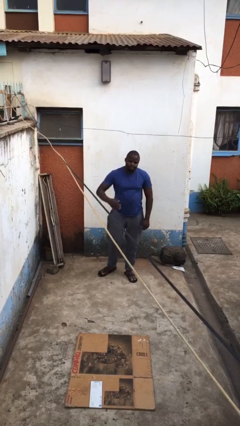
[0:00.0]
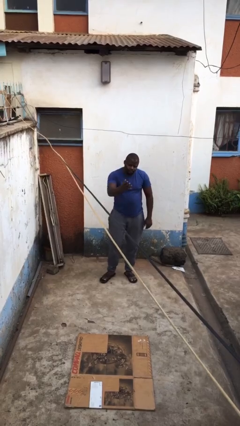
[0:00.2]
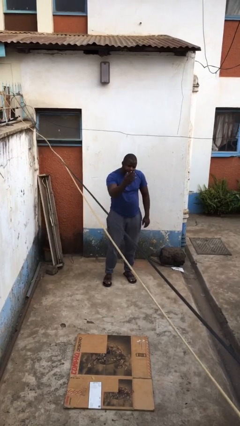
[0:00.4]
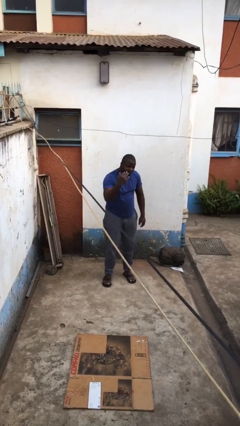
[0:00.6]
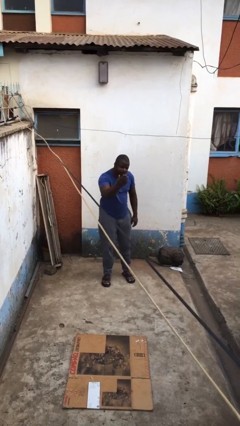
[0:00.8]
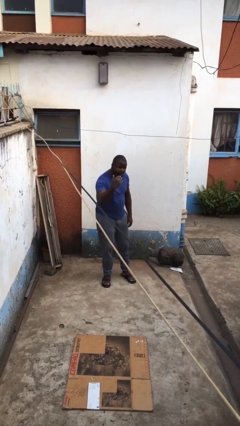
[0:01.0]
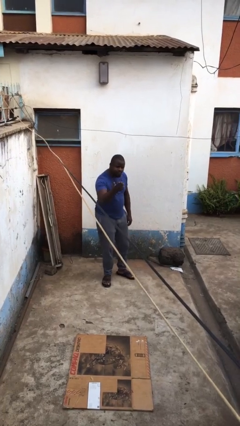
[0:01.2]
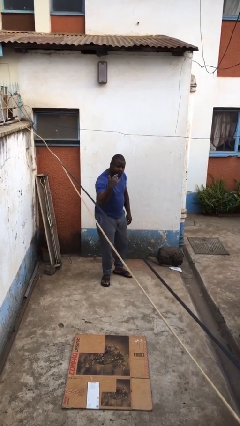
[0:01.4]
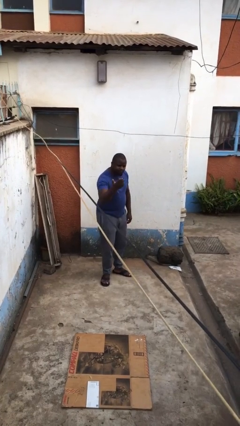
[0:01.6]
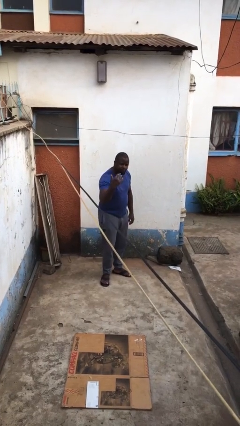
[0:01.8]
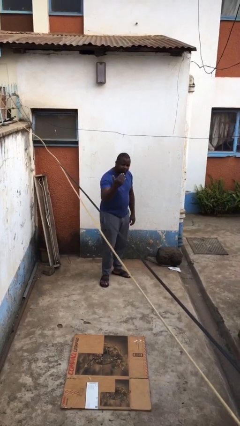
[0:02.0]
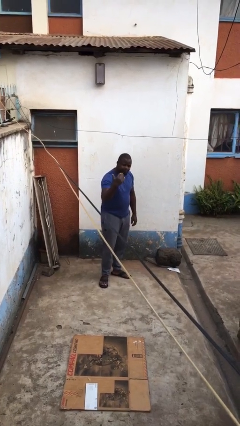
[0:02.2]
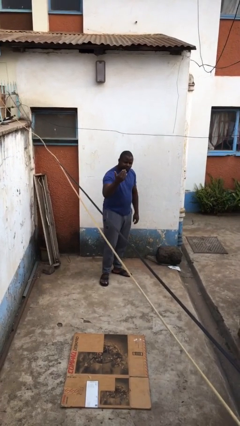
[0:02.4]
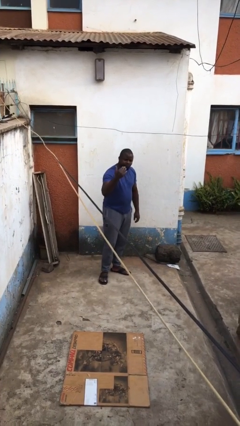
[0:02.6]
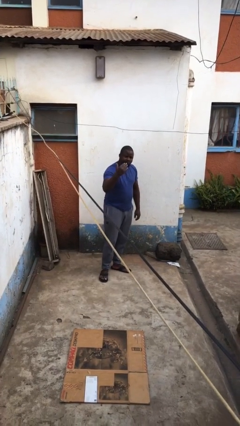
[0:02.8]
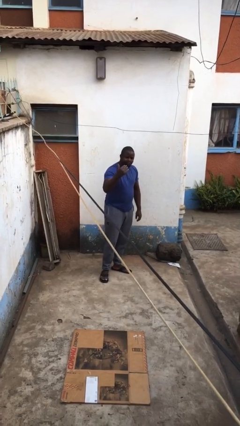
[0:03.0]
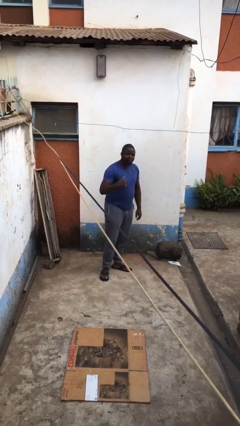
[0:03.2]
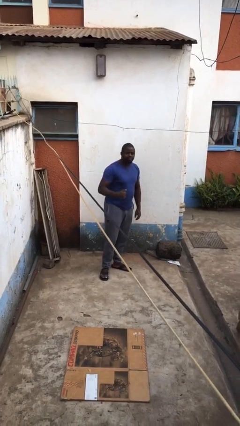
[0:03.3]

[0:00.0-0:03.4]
person gestures come here

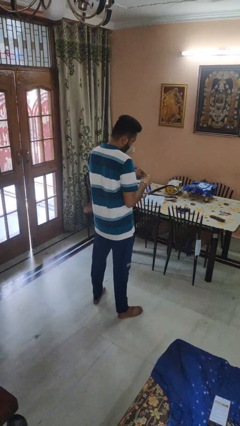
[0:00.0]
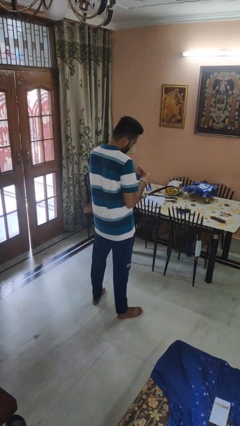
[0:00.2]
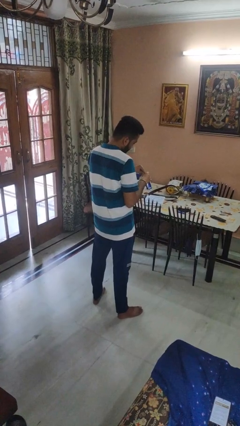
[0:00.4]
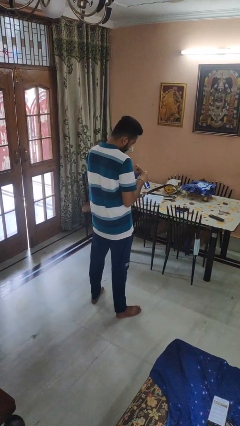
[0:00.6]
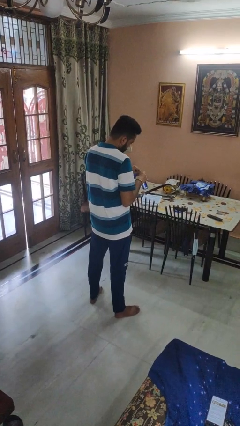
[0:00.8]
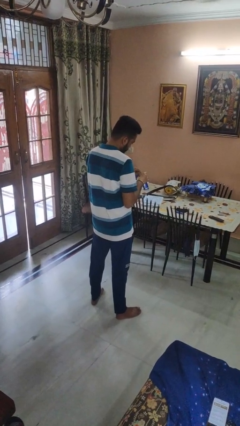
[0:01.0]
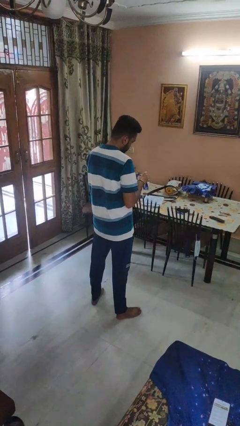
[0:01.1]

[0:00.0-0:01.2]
person opens beverage can

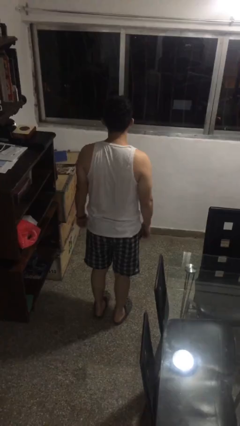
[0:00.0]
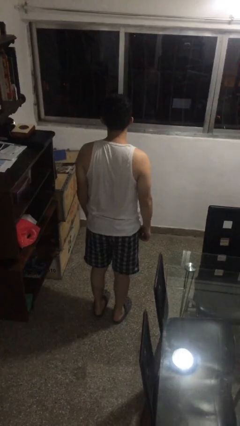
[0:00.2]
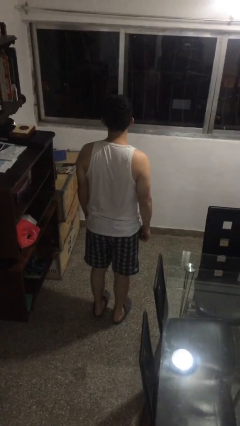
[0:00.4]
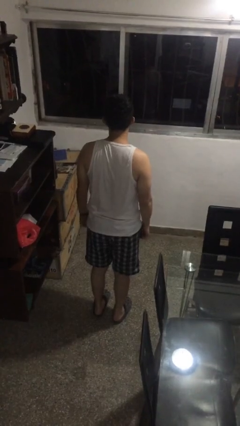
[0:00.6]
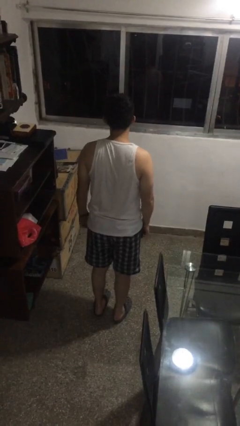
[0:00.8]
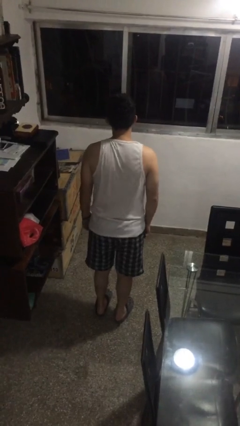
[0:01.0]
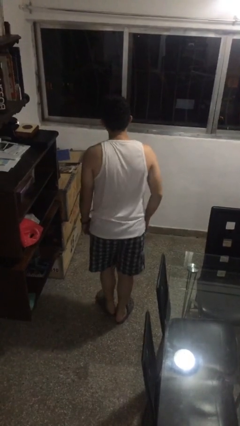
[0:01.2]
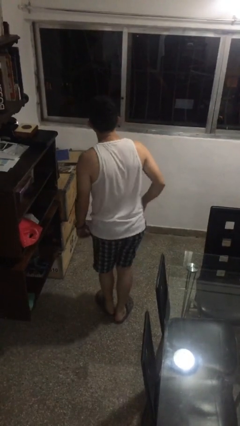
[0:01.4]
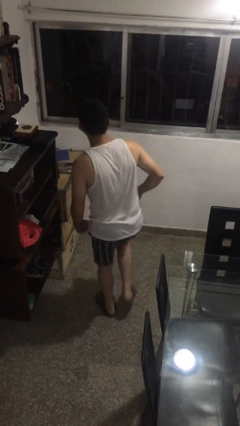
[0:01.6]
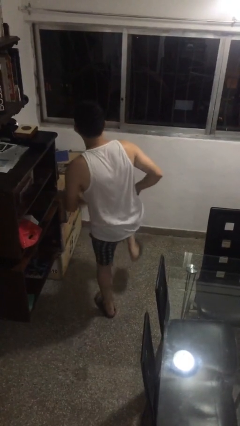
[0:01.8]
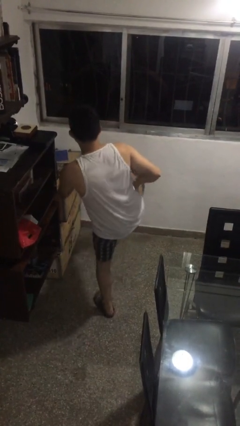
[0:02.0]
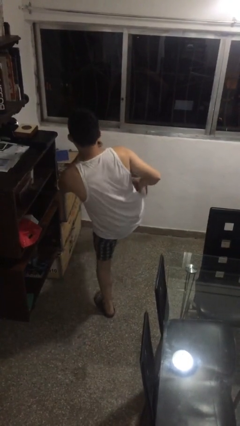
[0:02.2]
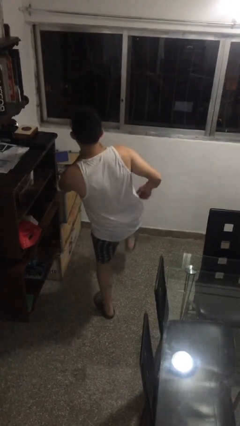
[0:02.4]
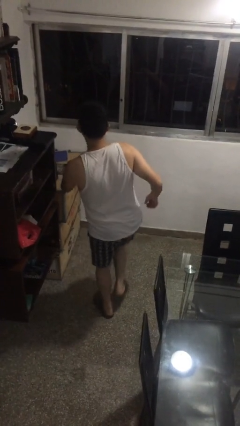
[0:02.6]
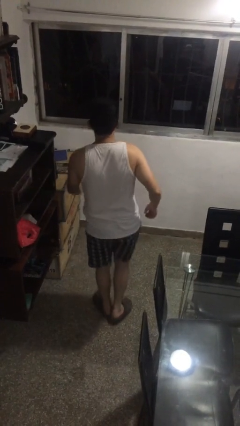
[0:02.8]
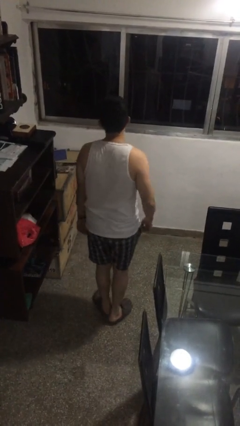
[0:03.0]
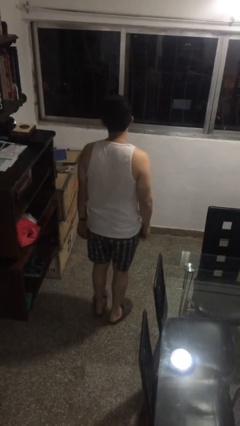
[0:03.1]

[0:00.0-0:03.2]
person karate kicks

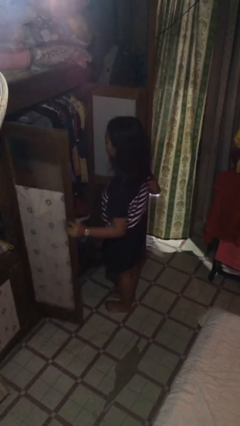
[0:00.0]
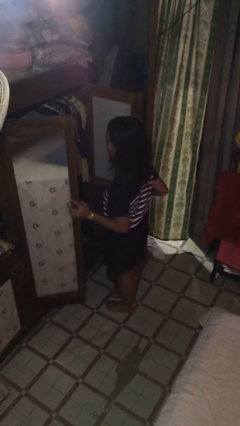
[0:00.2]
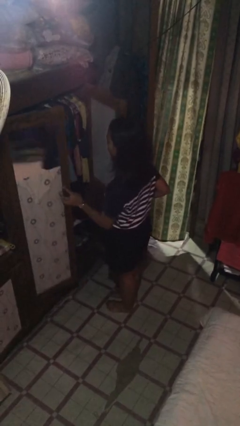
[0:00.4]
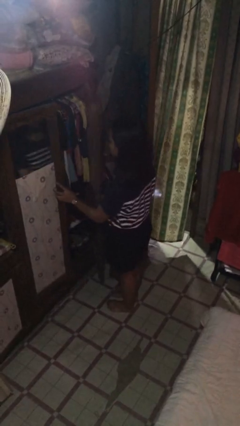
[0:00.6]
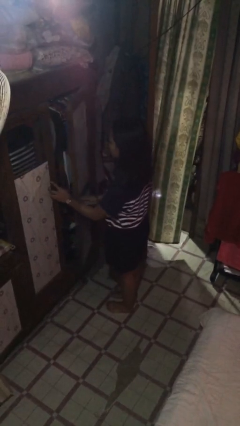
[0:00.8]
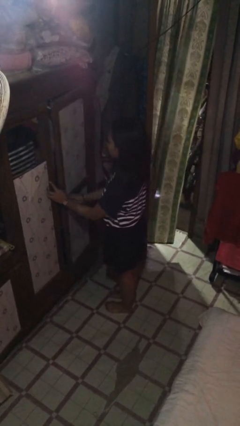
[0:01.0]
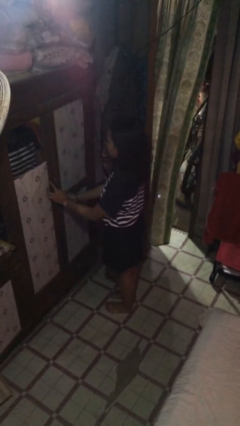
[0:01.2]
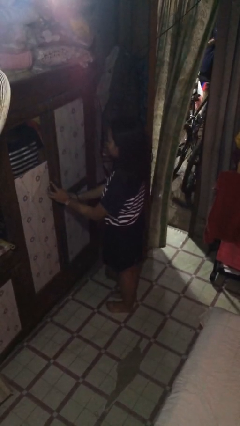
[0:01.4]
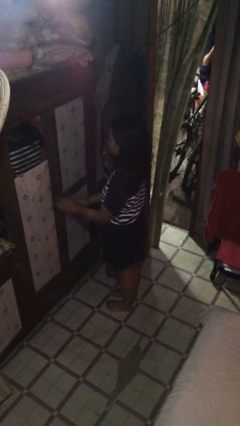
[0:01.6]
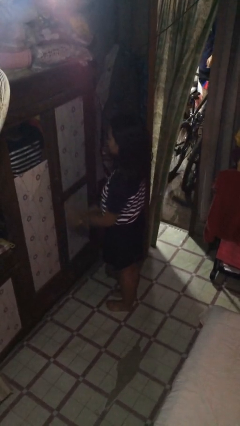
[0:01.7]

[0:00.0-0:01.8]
person closes closet door

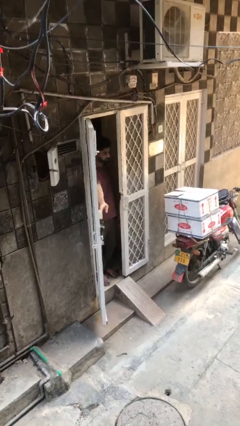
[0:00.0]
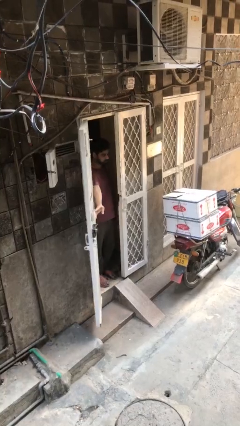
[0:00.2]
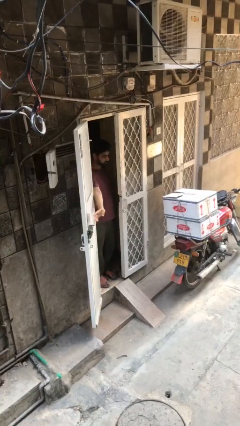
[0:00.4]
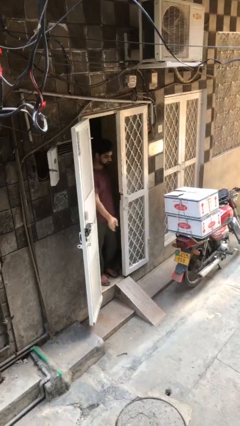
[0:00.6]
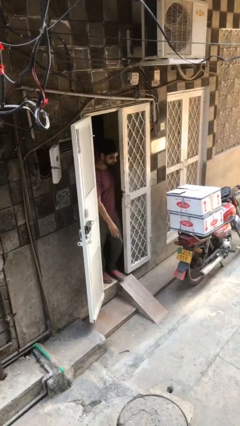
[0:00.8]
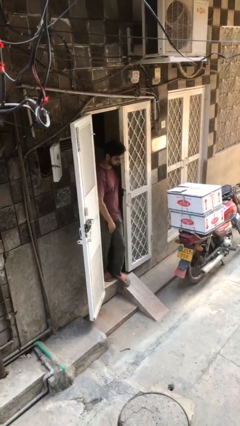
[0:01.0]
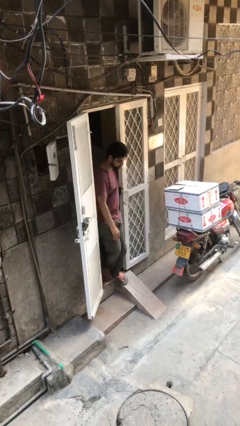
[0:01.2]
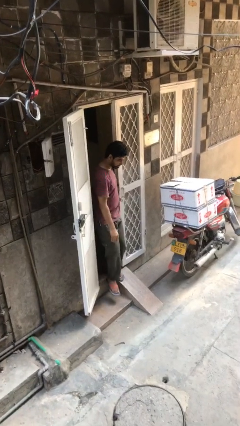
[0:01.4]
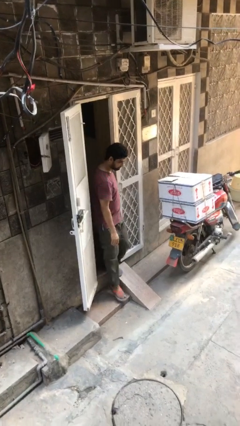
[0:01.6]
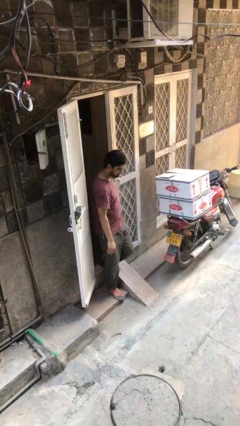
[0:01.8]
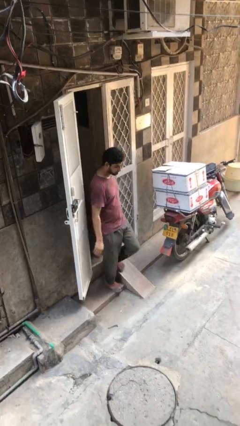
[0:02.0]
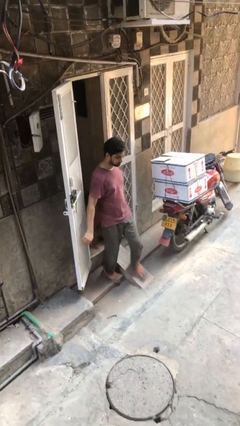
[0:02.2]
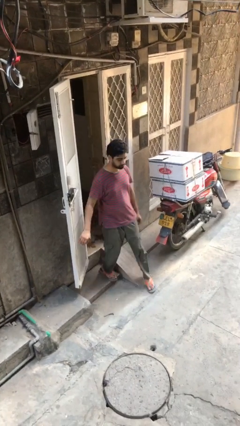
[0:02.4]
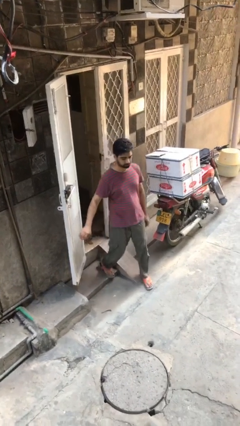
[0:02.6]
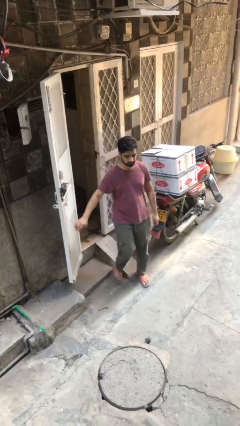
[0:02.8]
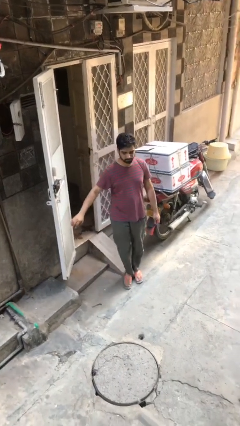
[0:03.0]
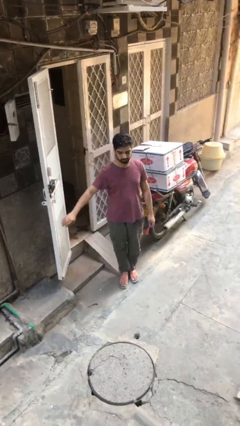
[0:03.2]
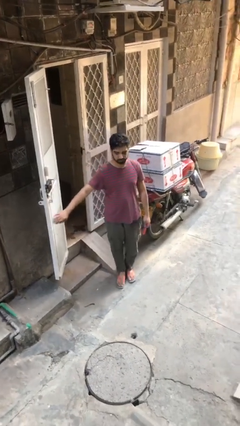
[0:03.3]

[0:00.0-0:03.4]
person enters scene through structure

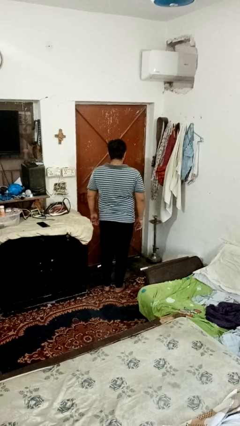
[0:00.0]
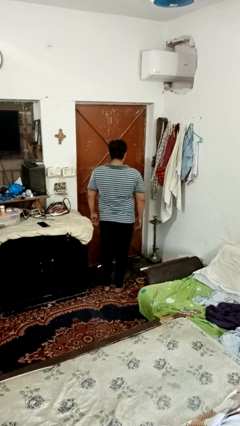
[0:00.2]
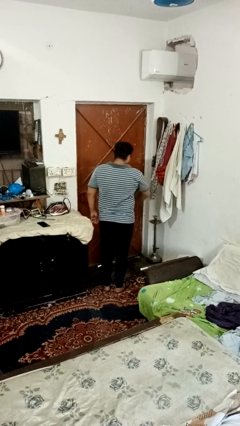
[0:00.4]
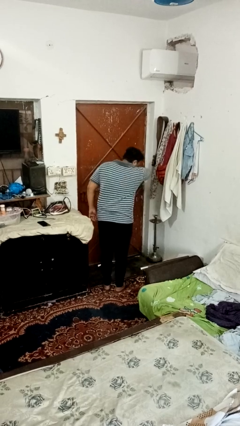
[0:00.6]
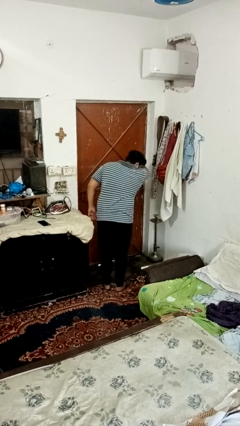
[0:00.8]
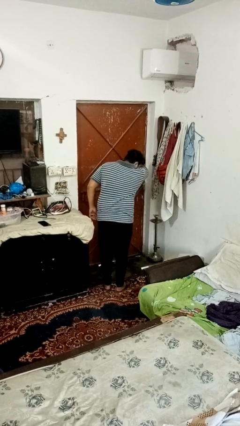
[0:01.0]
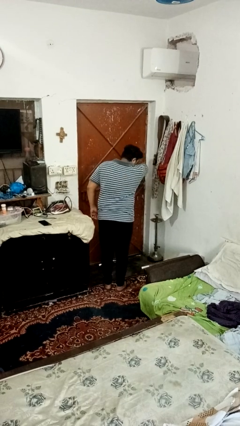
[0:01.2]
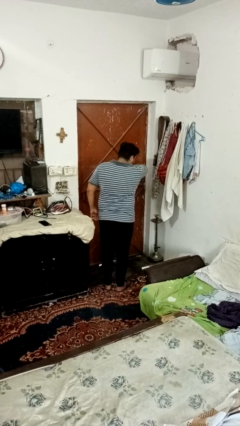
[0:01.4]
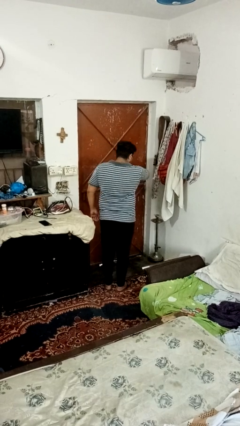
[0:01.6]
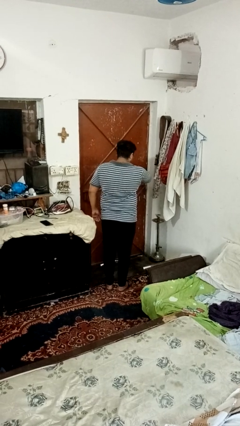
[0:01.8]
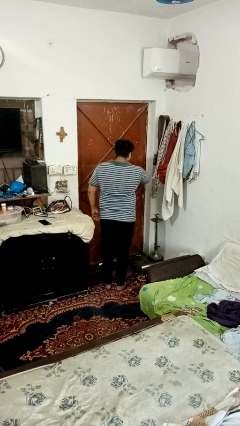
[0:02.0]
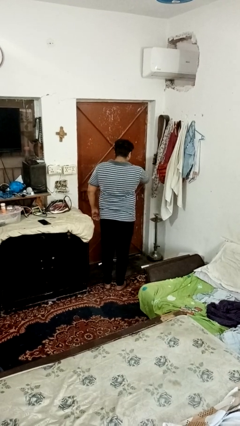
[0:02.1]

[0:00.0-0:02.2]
person sneezes into arm

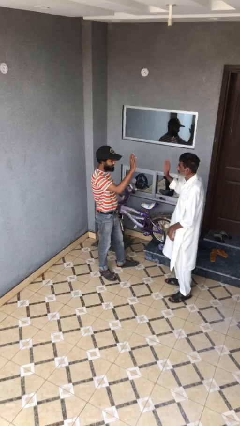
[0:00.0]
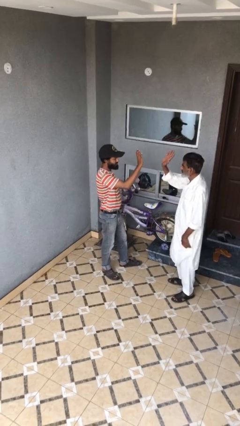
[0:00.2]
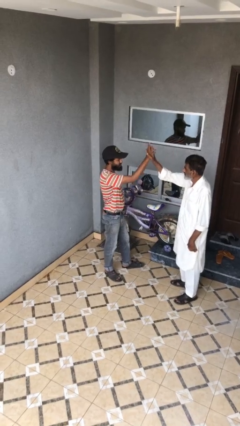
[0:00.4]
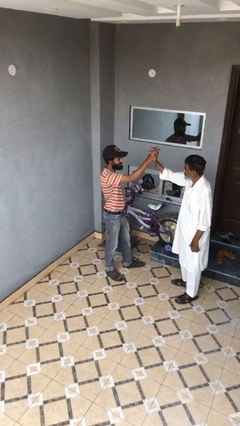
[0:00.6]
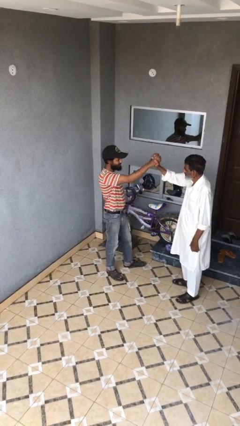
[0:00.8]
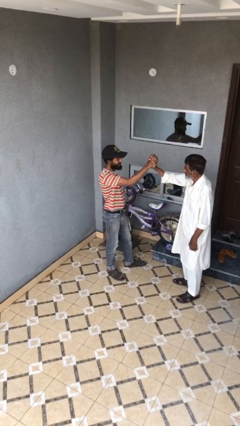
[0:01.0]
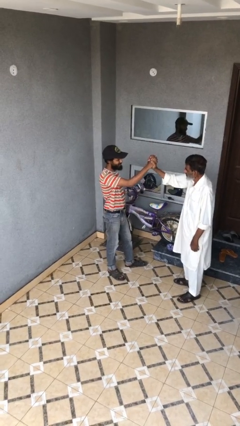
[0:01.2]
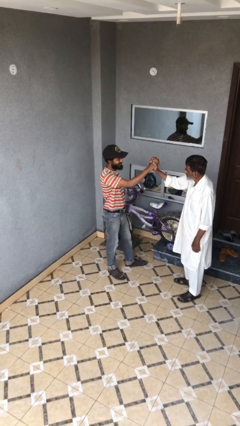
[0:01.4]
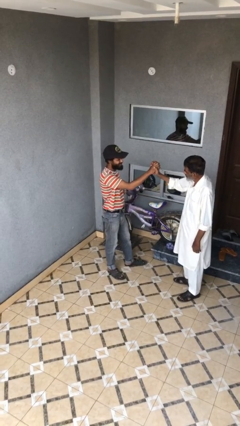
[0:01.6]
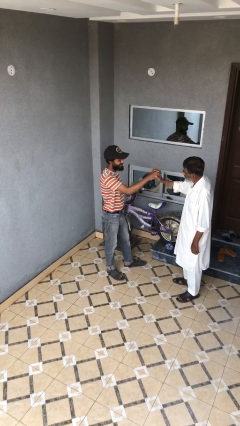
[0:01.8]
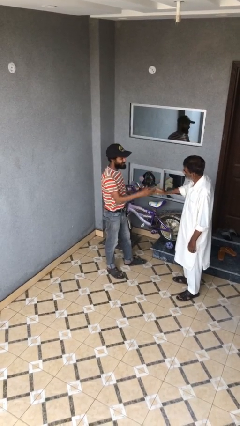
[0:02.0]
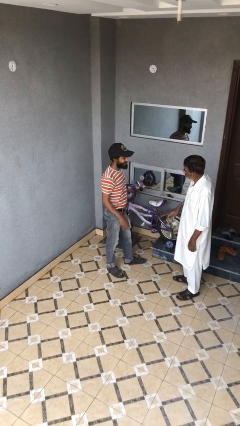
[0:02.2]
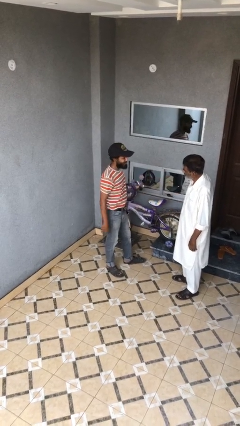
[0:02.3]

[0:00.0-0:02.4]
person highfives hand
